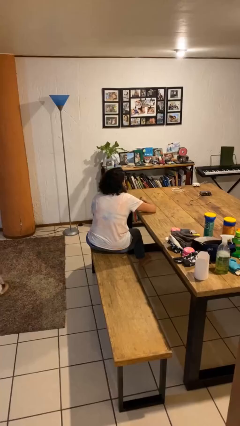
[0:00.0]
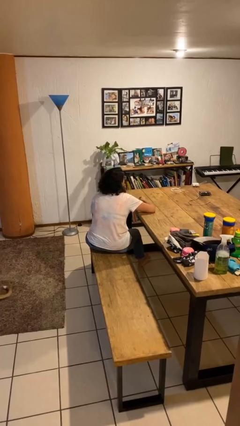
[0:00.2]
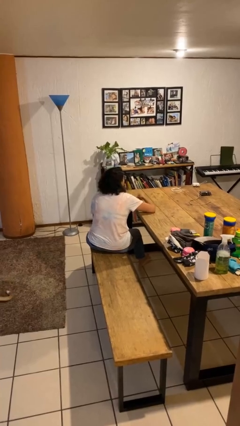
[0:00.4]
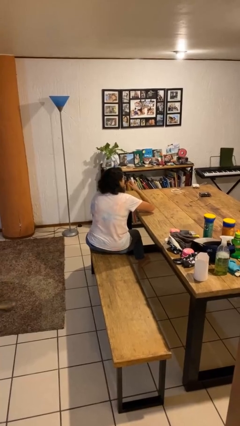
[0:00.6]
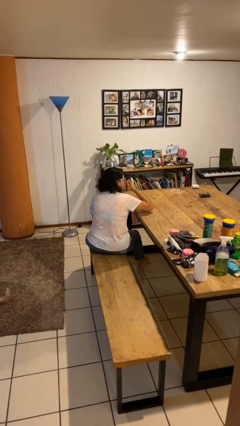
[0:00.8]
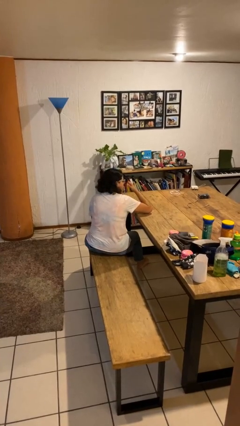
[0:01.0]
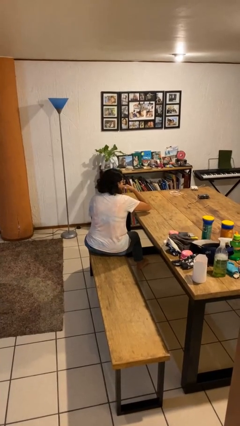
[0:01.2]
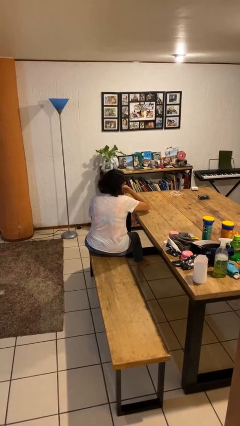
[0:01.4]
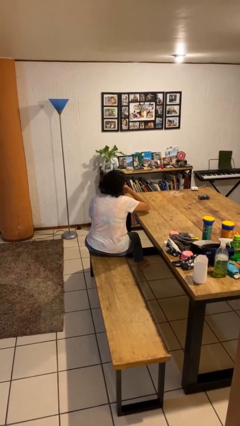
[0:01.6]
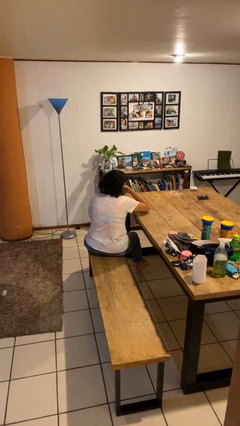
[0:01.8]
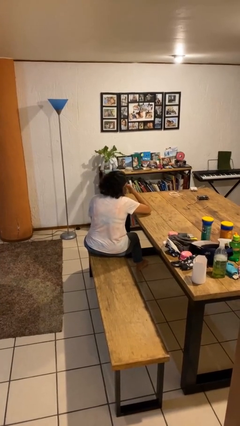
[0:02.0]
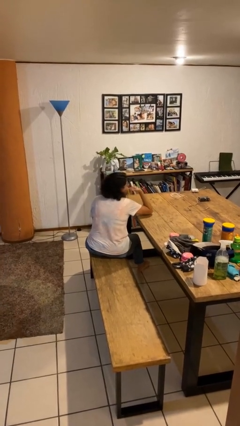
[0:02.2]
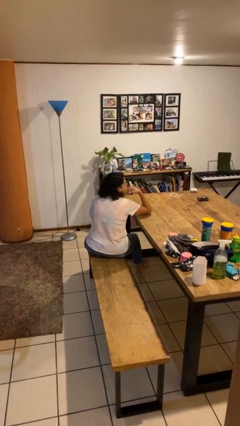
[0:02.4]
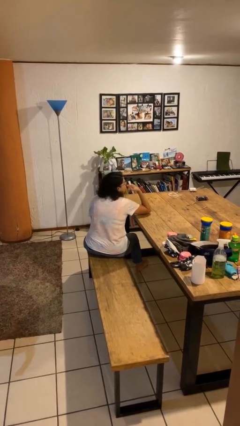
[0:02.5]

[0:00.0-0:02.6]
person licks fingers

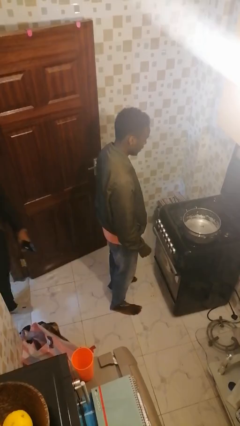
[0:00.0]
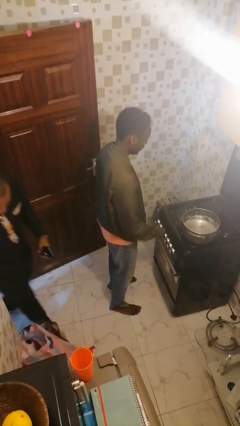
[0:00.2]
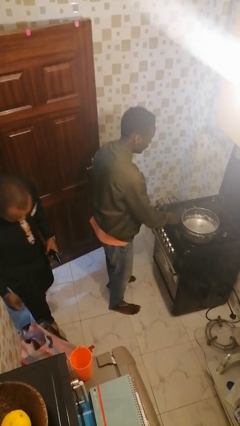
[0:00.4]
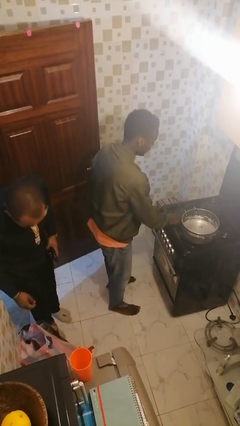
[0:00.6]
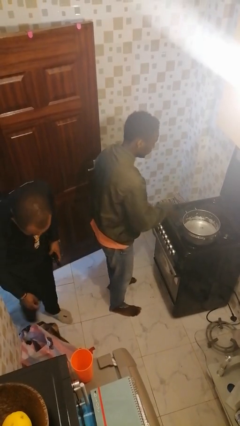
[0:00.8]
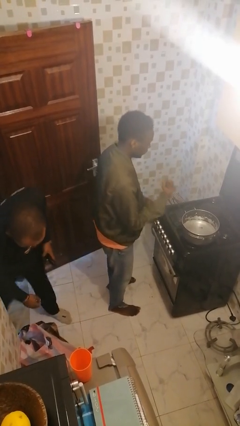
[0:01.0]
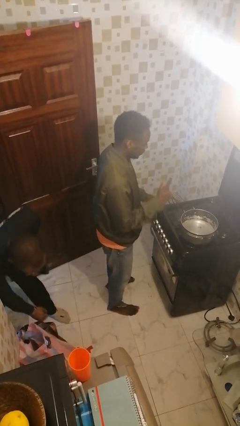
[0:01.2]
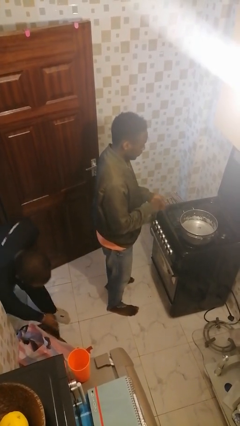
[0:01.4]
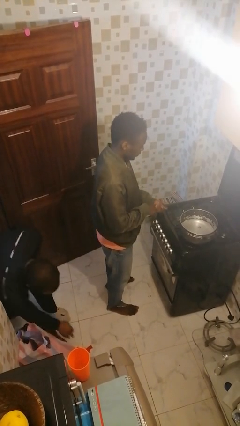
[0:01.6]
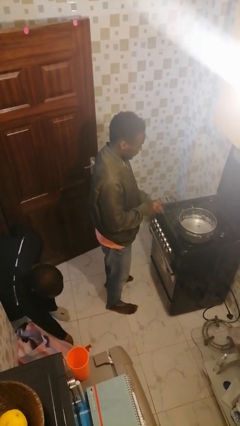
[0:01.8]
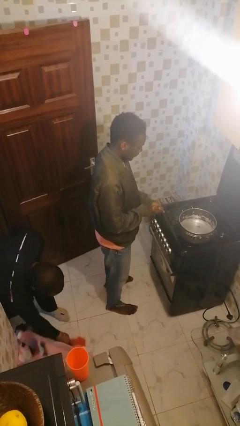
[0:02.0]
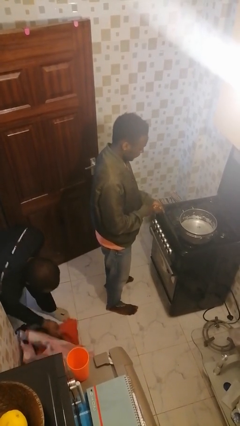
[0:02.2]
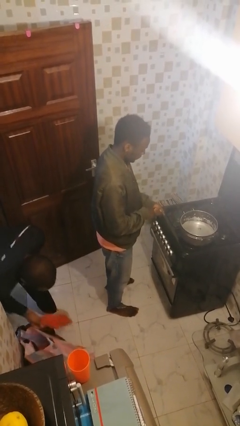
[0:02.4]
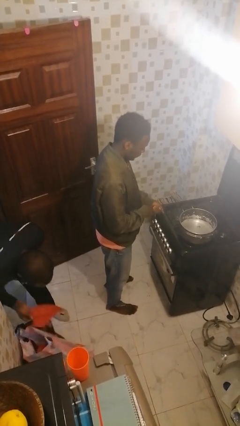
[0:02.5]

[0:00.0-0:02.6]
person burns hand
